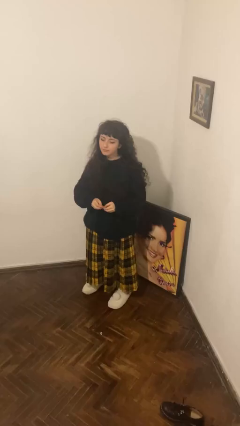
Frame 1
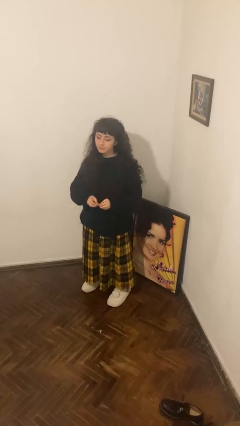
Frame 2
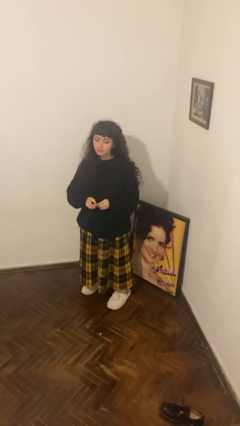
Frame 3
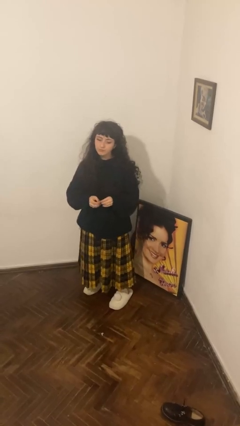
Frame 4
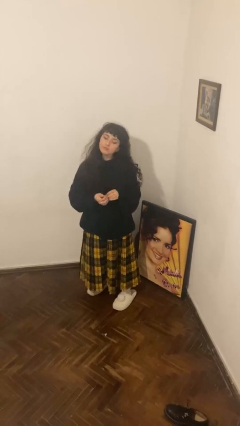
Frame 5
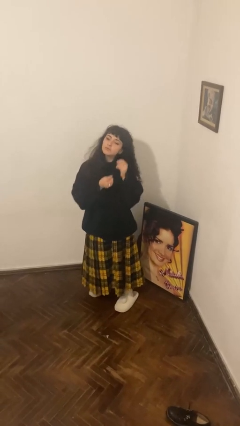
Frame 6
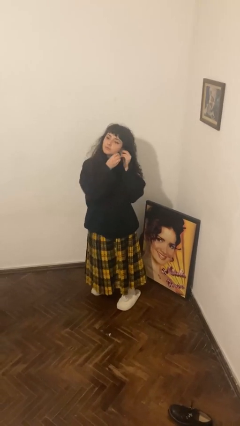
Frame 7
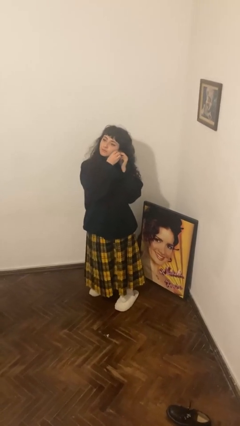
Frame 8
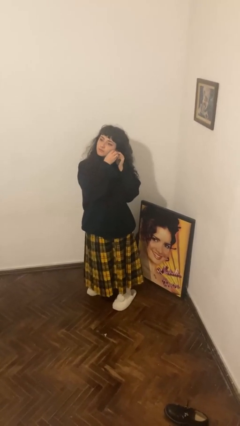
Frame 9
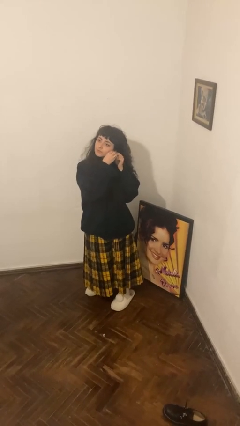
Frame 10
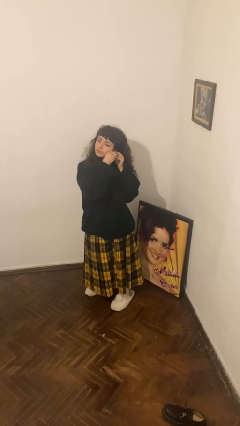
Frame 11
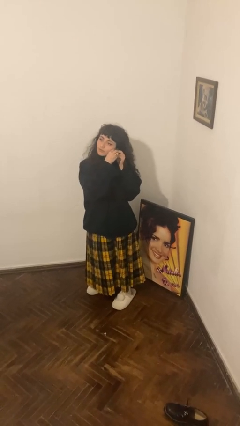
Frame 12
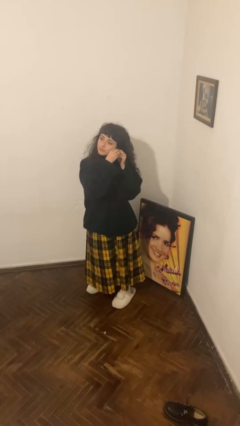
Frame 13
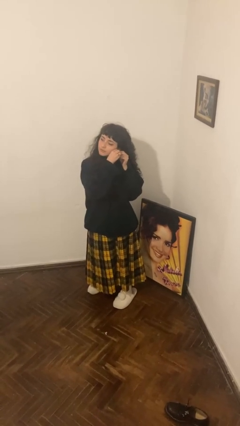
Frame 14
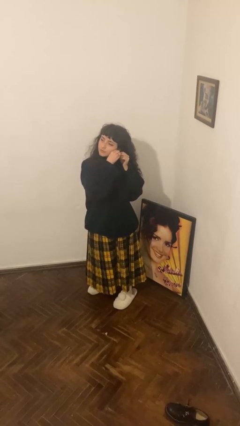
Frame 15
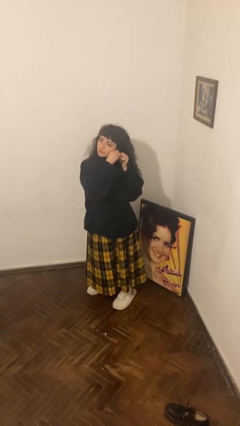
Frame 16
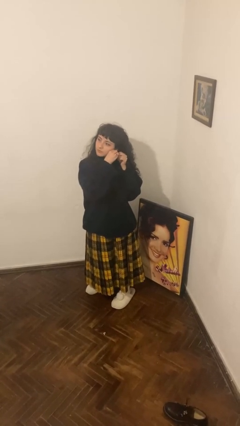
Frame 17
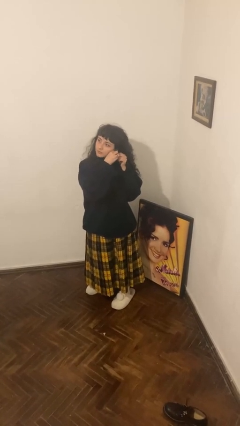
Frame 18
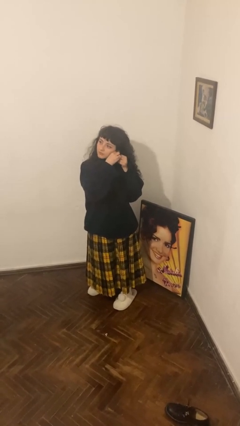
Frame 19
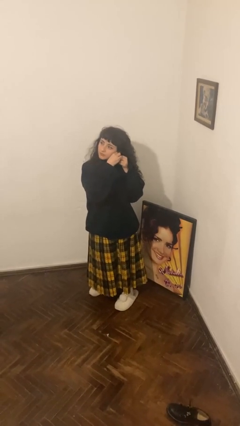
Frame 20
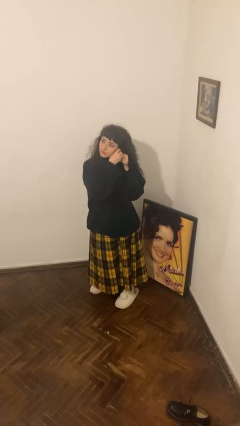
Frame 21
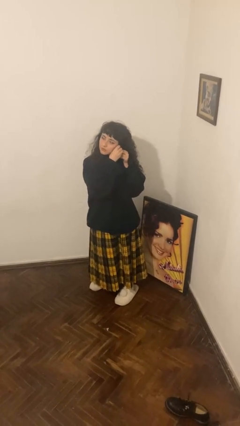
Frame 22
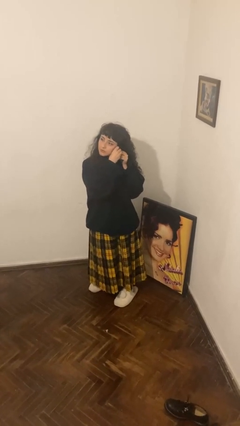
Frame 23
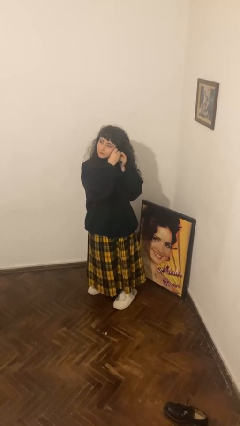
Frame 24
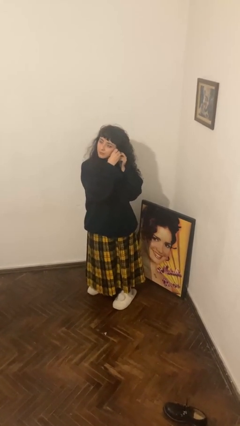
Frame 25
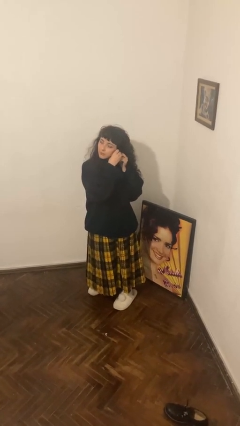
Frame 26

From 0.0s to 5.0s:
person puts on earrings

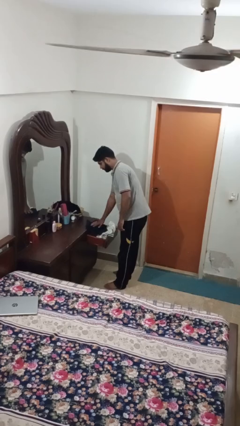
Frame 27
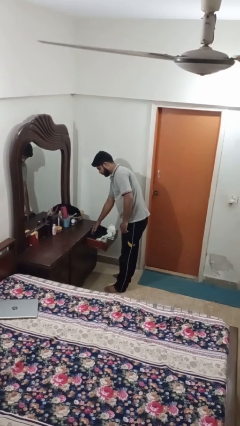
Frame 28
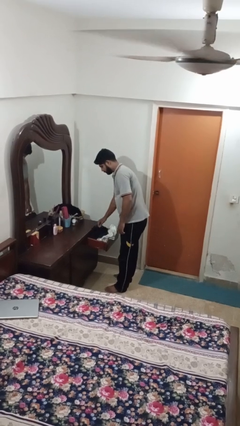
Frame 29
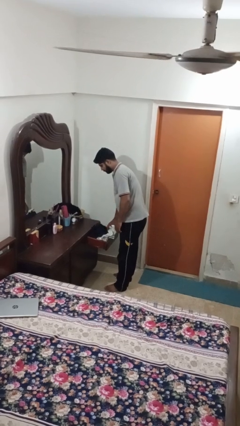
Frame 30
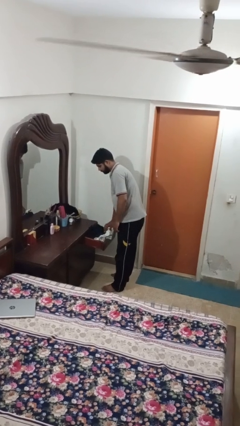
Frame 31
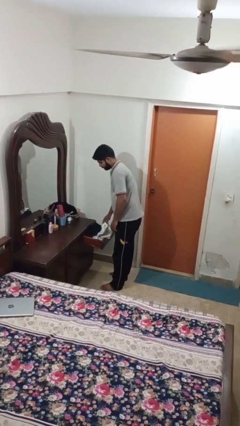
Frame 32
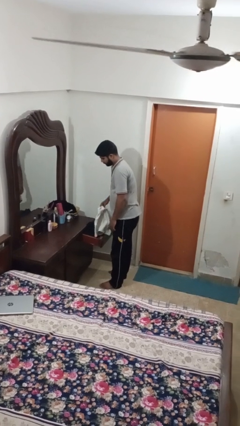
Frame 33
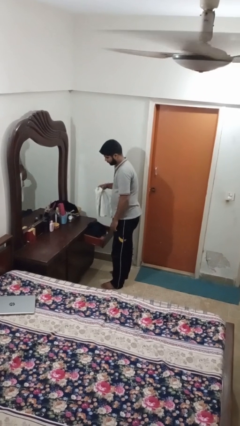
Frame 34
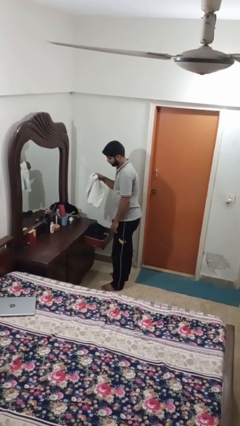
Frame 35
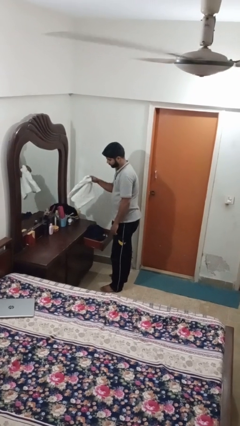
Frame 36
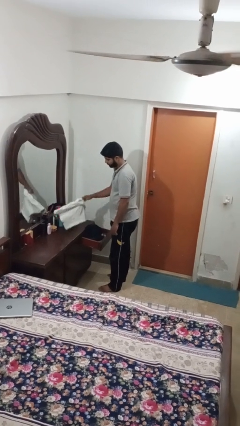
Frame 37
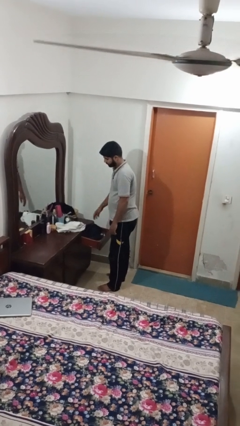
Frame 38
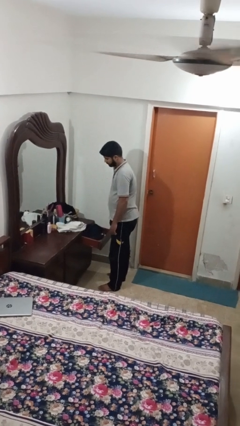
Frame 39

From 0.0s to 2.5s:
person takes clothes from dresser

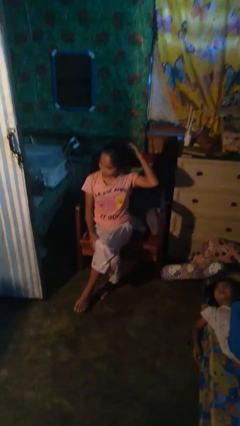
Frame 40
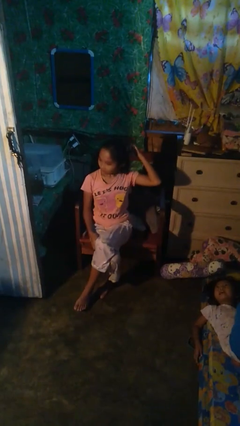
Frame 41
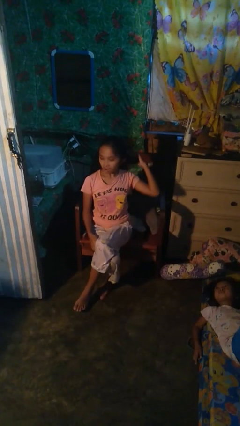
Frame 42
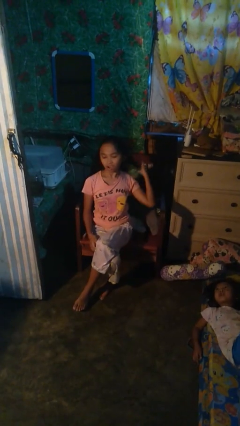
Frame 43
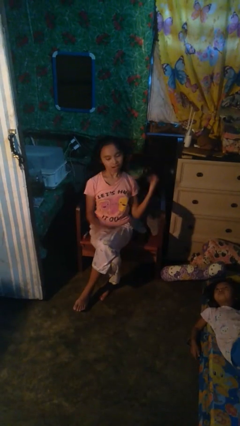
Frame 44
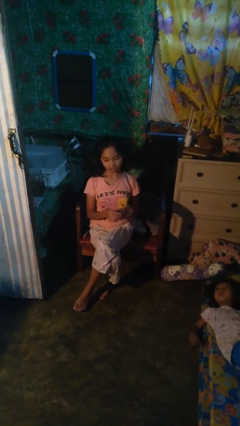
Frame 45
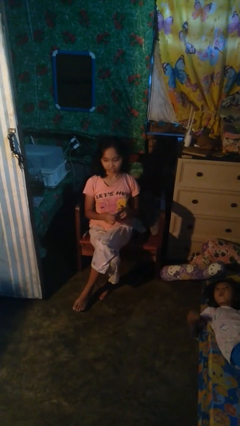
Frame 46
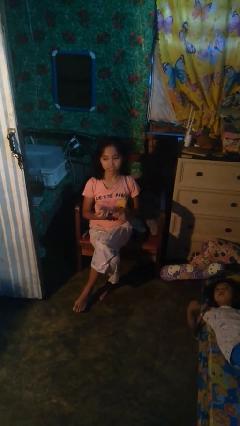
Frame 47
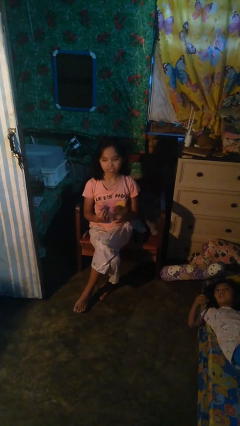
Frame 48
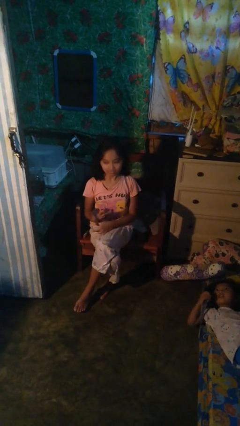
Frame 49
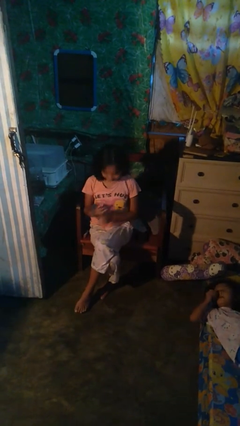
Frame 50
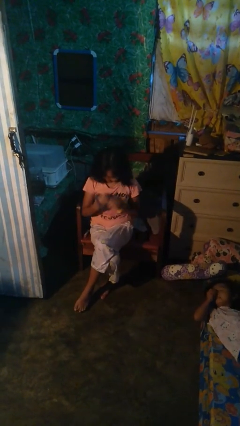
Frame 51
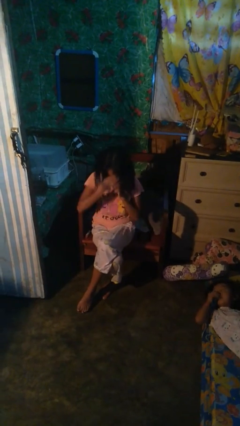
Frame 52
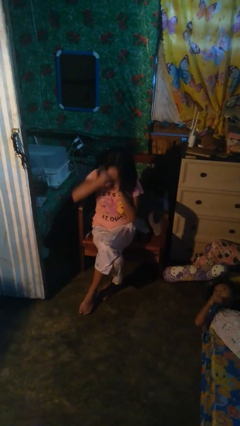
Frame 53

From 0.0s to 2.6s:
person takes off hairtie

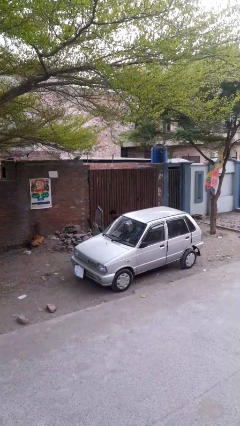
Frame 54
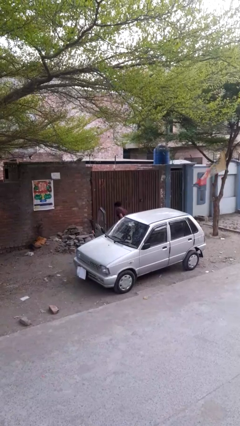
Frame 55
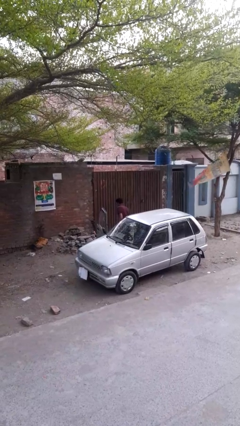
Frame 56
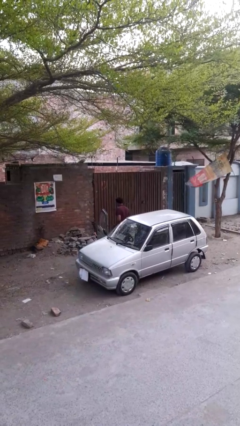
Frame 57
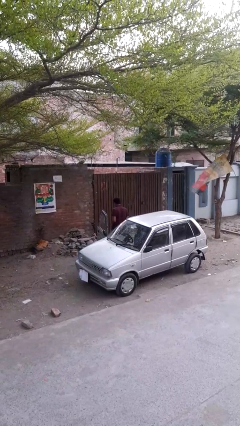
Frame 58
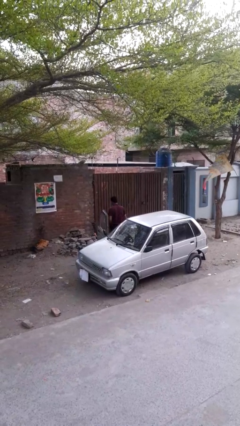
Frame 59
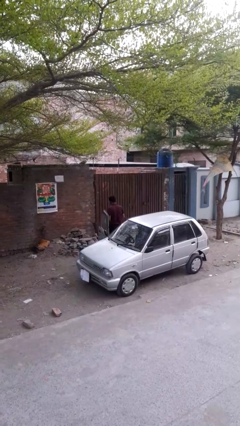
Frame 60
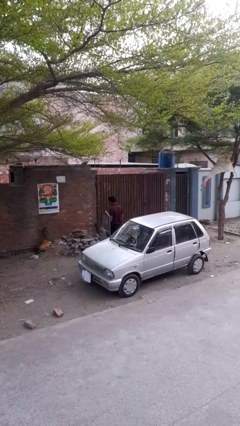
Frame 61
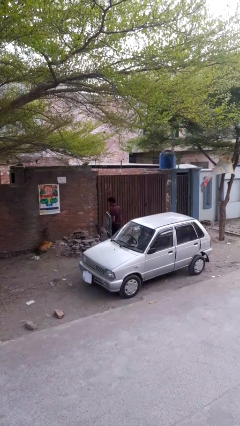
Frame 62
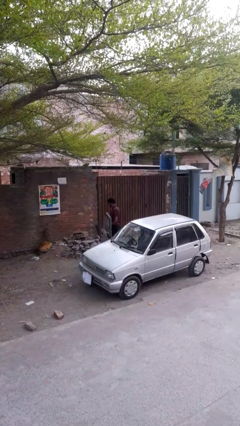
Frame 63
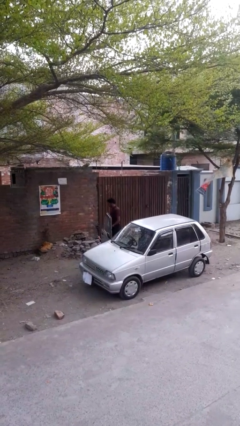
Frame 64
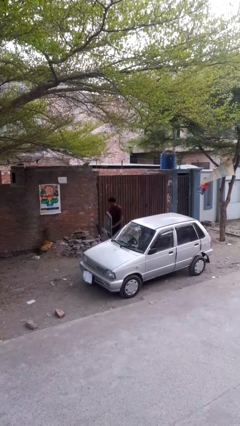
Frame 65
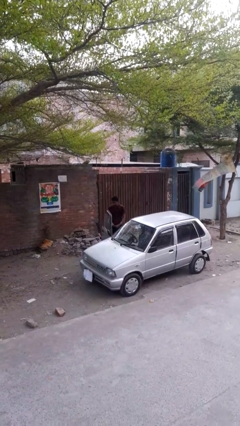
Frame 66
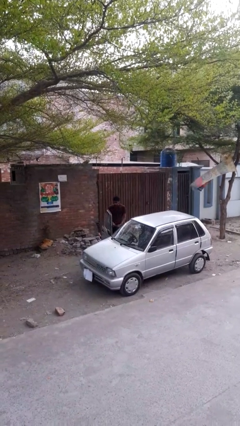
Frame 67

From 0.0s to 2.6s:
person exits car

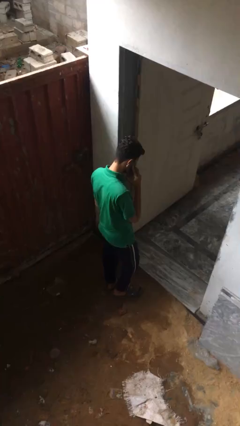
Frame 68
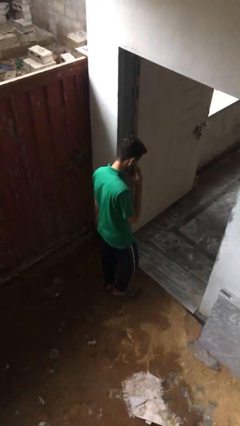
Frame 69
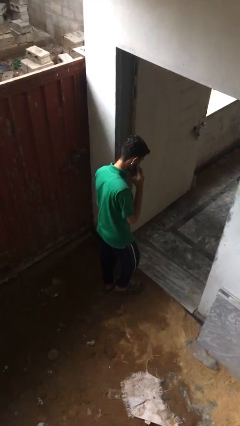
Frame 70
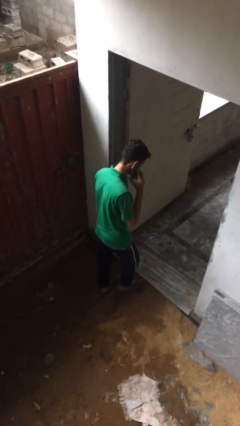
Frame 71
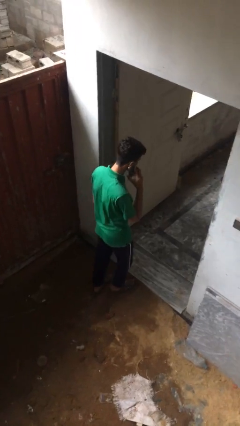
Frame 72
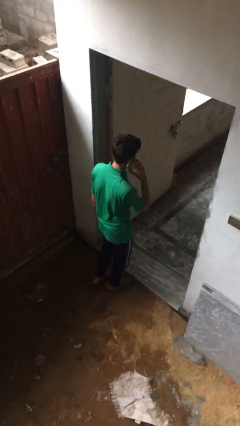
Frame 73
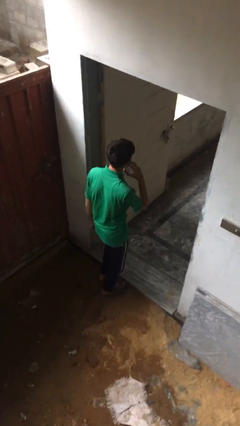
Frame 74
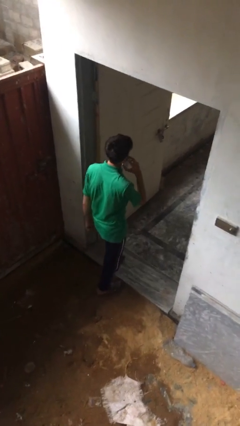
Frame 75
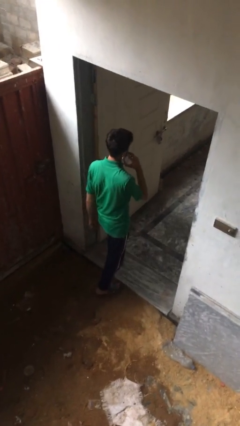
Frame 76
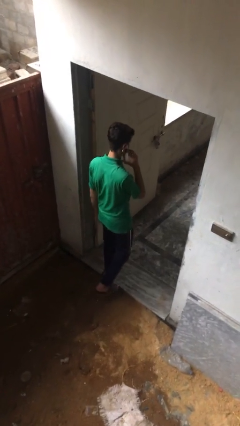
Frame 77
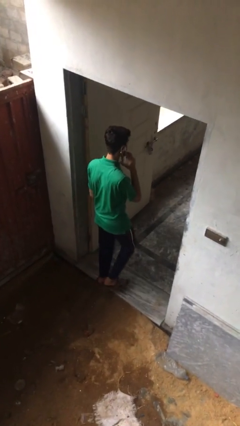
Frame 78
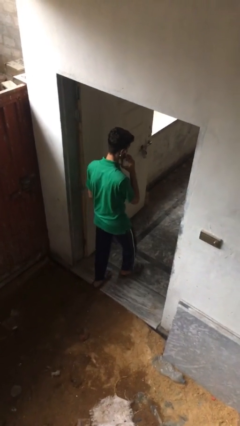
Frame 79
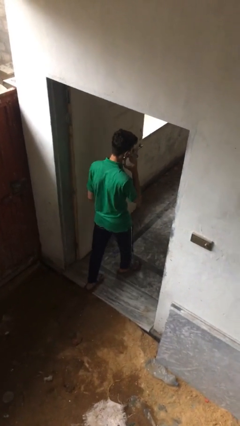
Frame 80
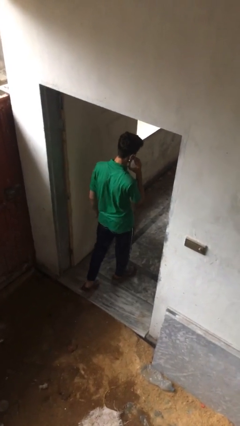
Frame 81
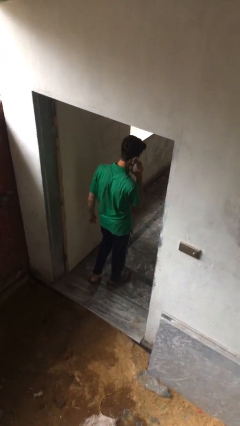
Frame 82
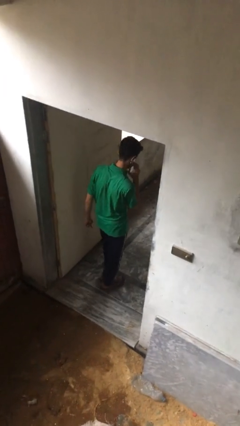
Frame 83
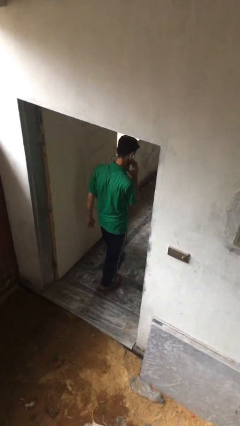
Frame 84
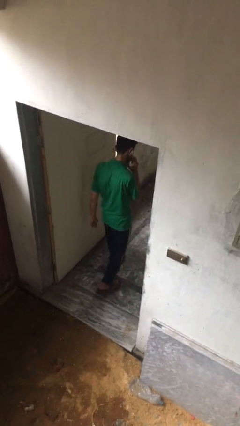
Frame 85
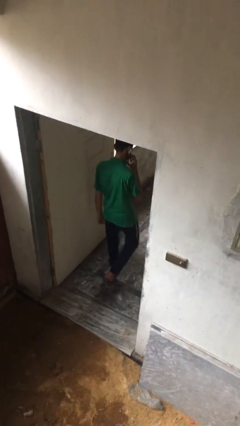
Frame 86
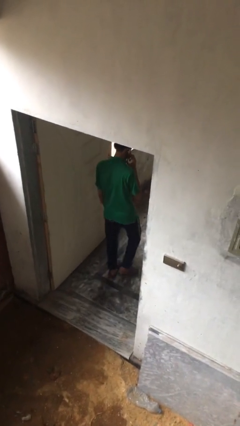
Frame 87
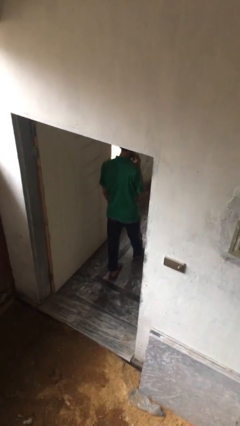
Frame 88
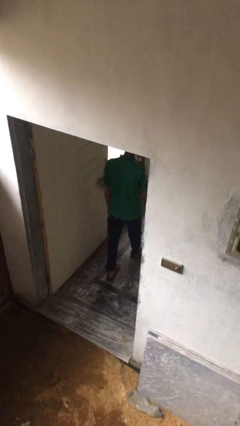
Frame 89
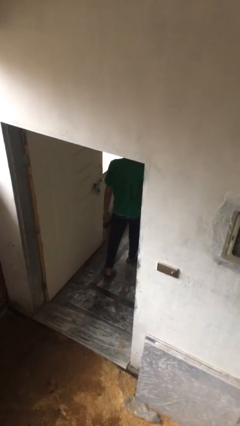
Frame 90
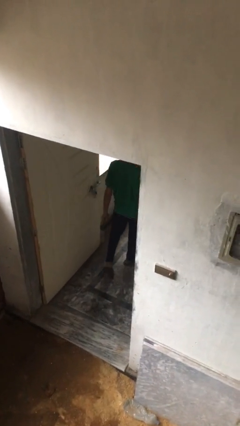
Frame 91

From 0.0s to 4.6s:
person exits scene through structure

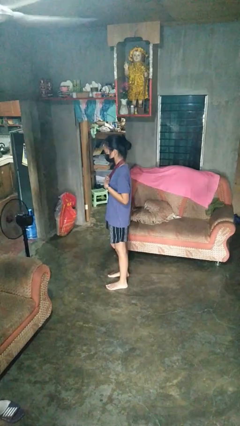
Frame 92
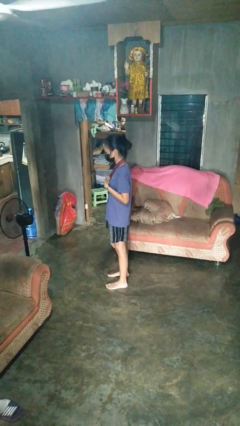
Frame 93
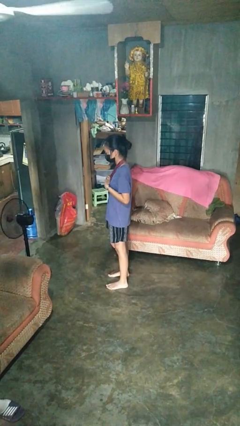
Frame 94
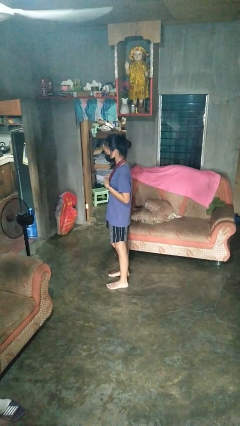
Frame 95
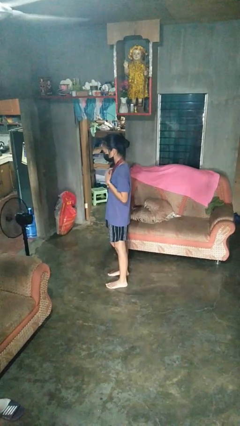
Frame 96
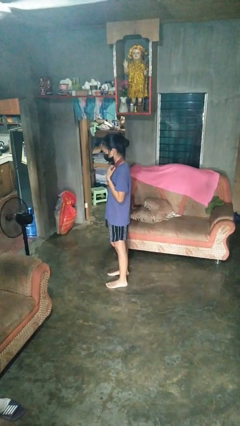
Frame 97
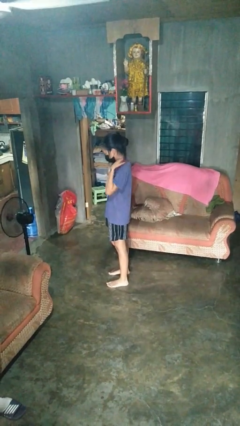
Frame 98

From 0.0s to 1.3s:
person takes off necklace
